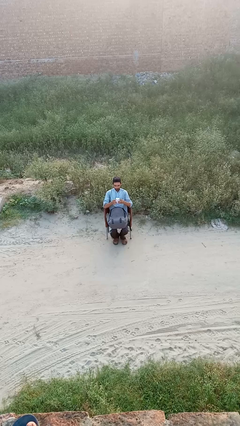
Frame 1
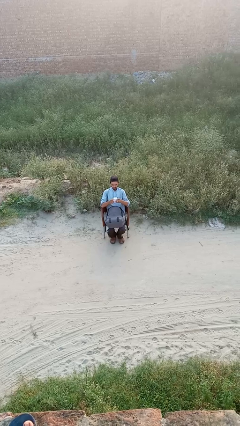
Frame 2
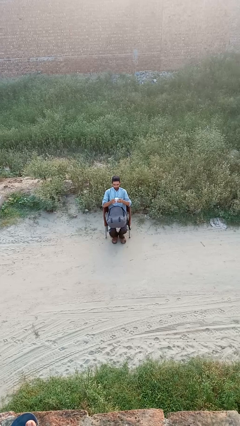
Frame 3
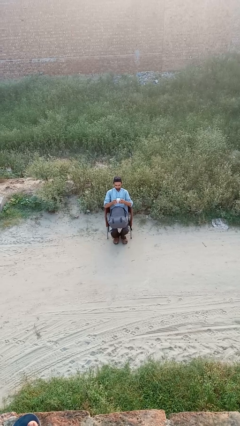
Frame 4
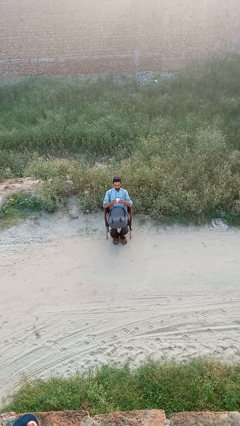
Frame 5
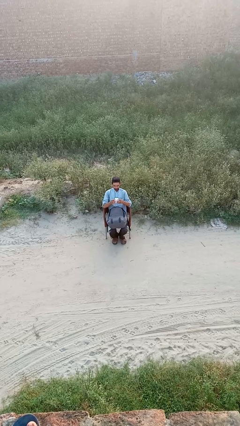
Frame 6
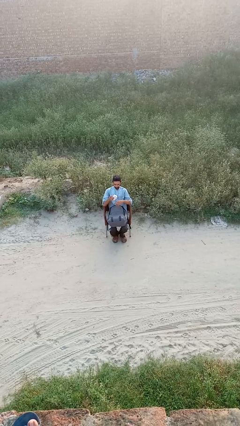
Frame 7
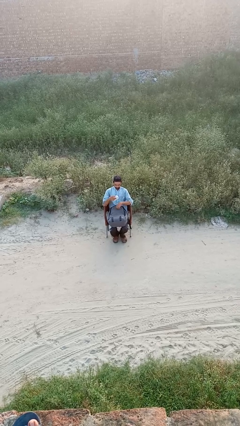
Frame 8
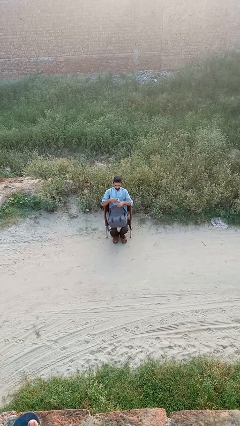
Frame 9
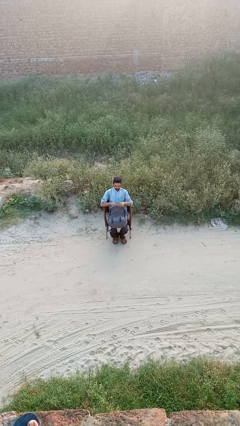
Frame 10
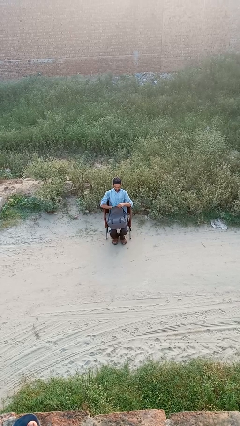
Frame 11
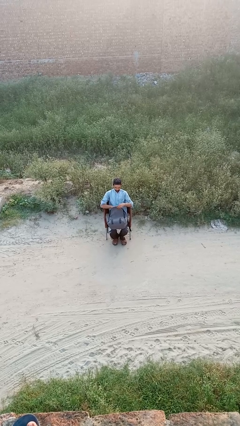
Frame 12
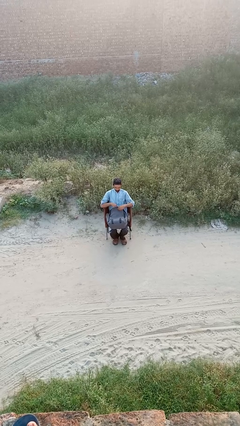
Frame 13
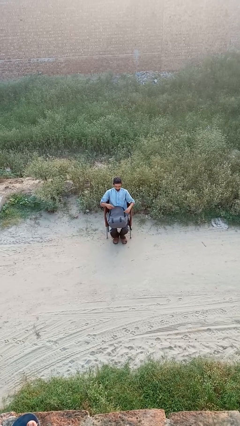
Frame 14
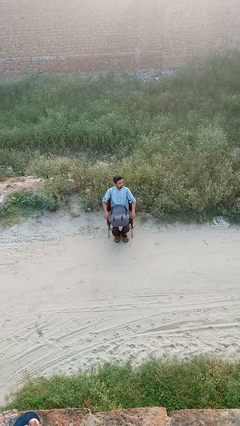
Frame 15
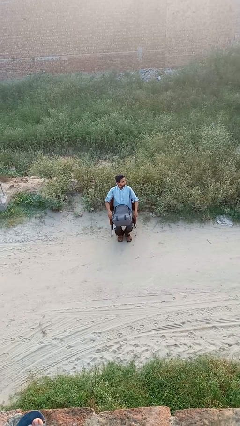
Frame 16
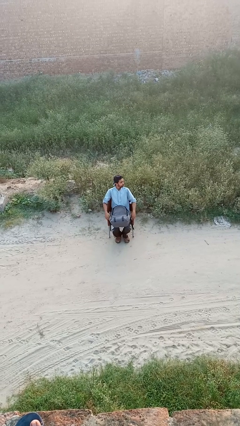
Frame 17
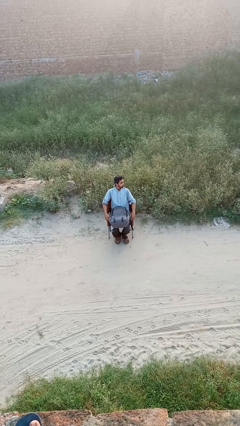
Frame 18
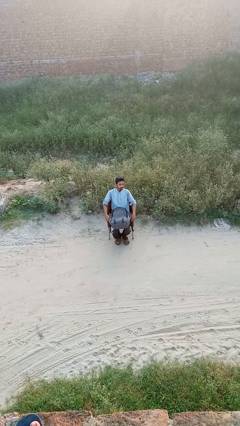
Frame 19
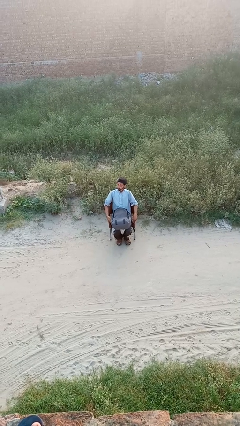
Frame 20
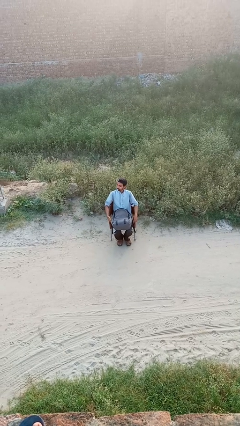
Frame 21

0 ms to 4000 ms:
person puts object into backpack

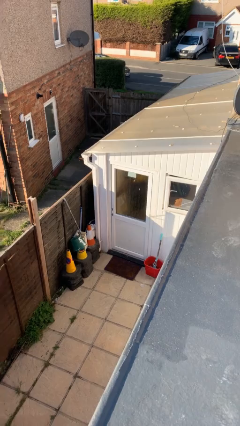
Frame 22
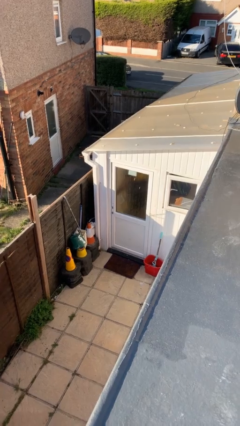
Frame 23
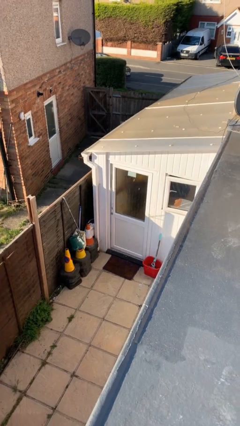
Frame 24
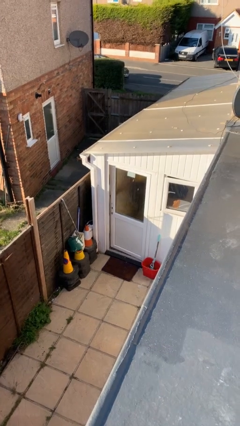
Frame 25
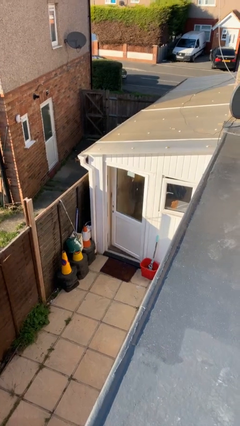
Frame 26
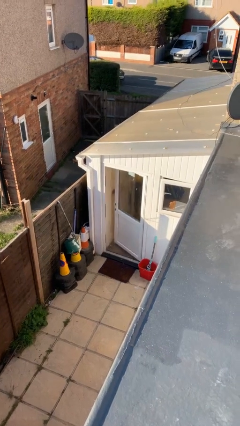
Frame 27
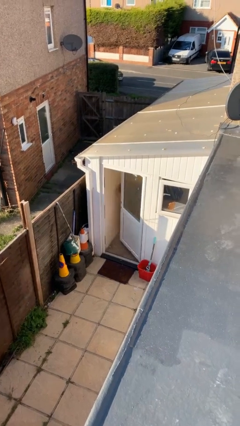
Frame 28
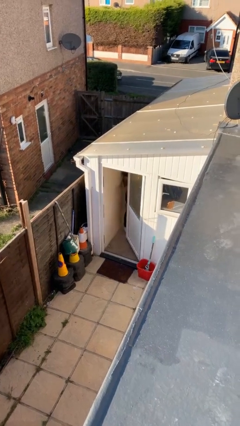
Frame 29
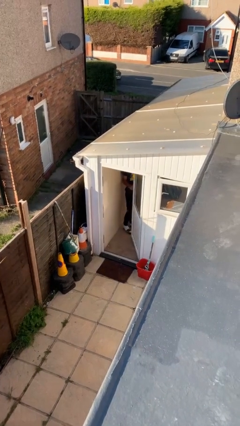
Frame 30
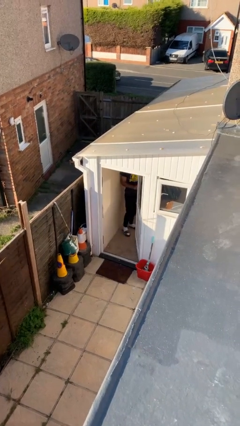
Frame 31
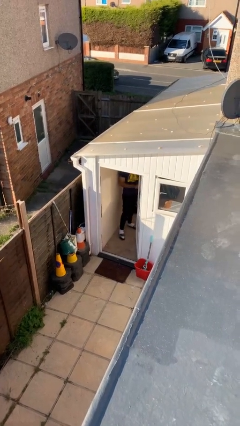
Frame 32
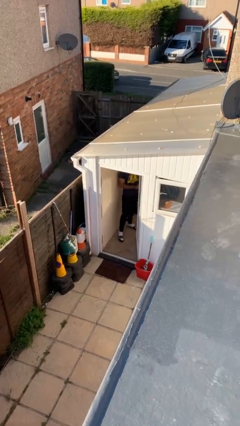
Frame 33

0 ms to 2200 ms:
person opens facility door

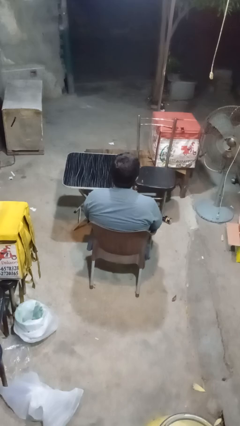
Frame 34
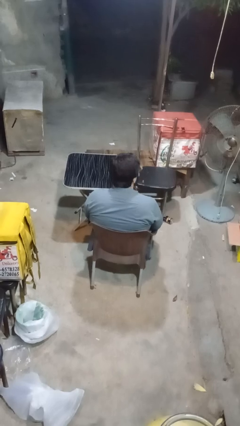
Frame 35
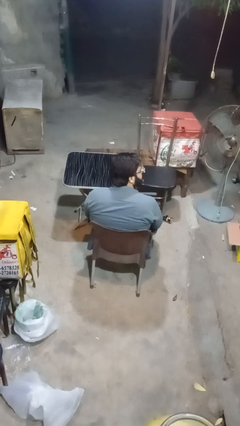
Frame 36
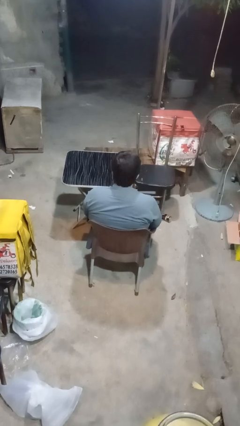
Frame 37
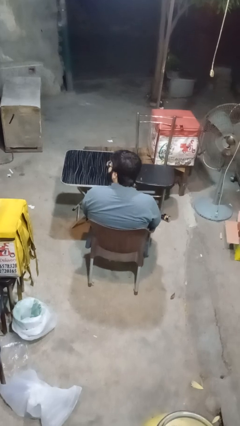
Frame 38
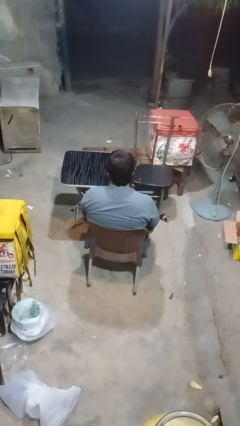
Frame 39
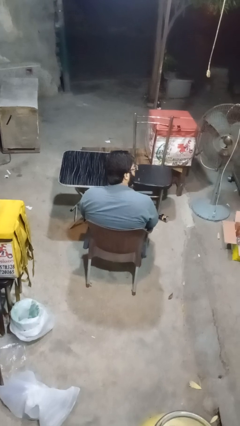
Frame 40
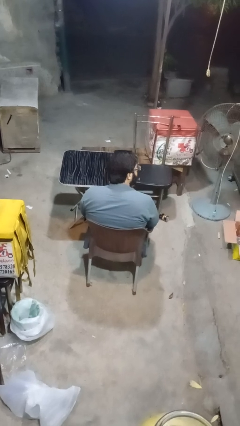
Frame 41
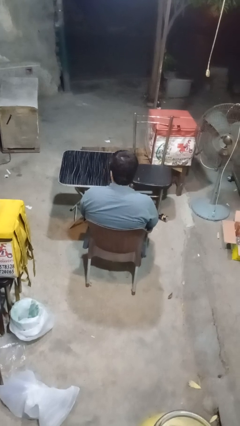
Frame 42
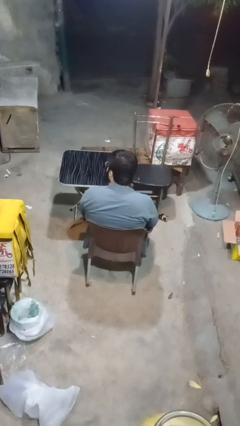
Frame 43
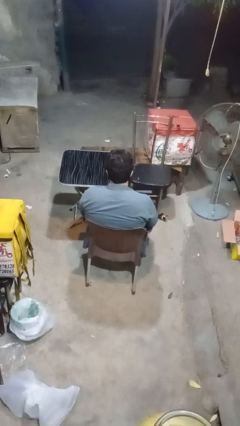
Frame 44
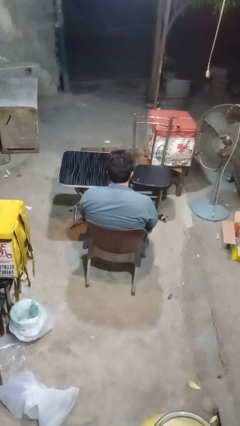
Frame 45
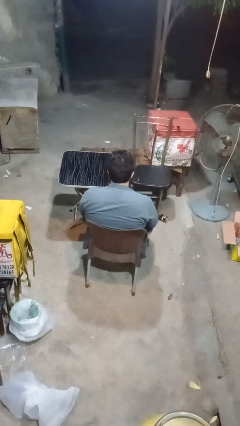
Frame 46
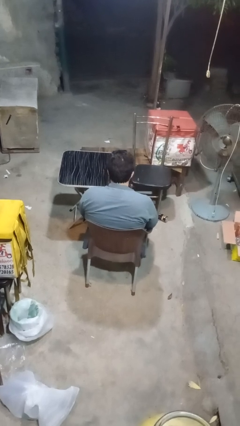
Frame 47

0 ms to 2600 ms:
person shakes head

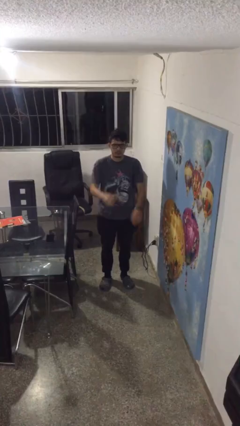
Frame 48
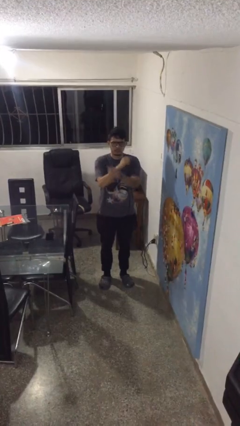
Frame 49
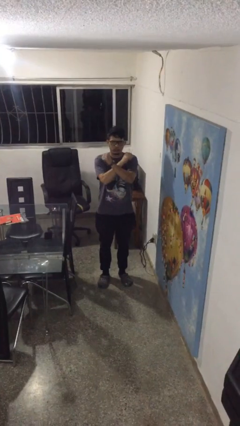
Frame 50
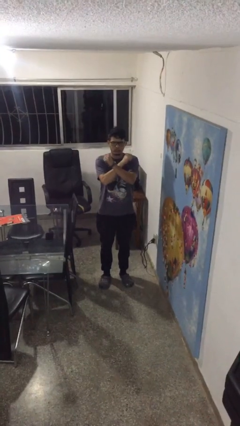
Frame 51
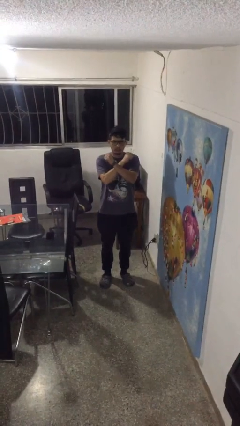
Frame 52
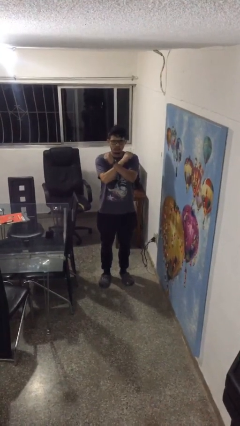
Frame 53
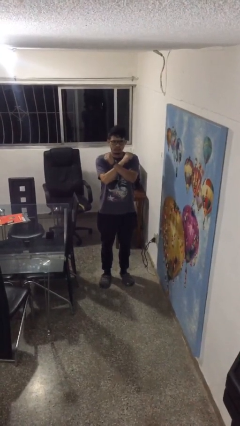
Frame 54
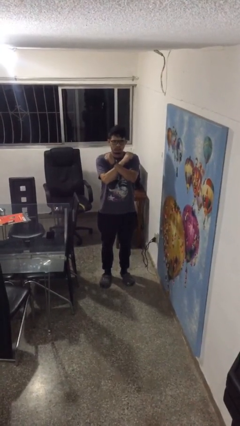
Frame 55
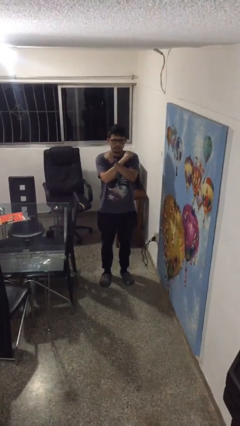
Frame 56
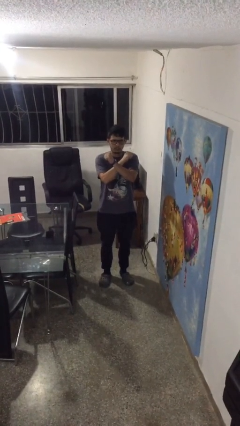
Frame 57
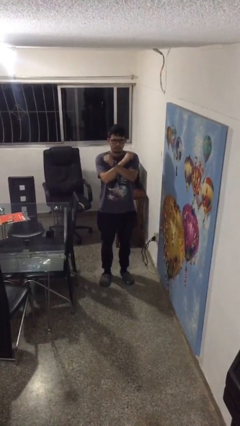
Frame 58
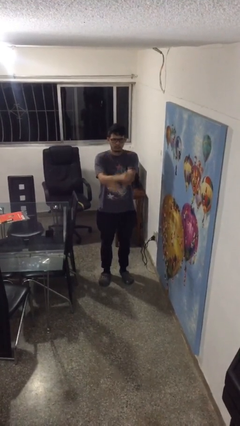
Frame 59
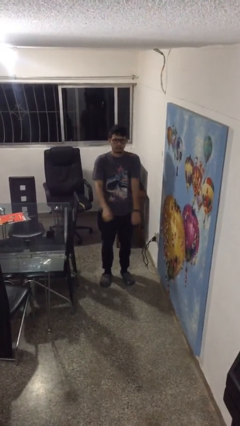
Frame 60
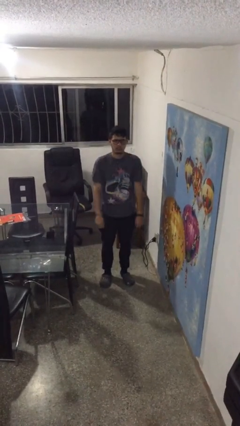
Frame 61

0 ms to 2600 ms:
person gestures arms x

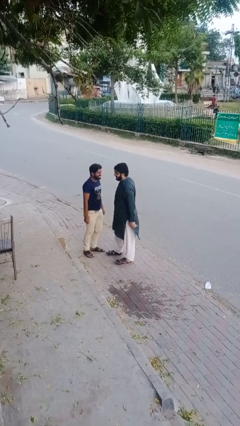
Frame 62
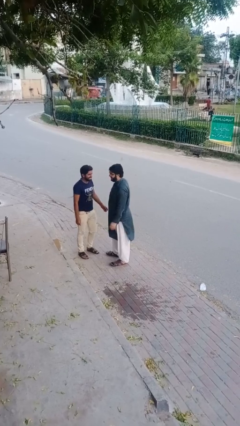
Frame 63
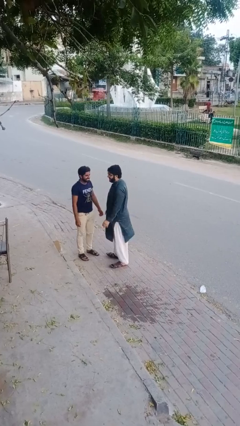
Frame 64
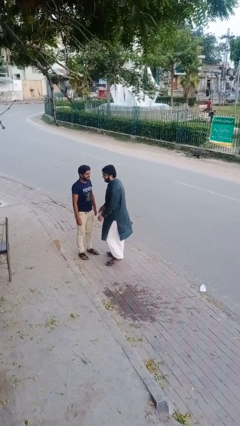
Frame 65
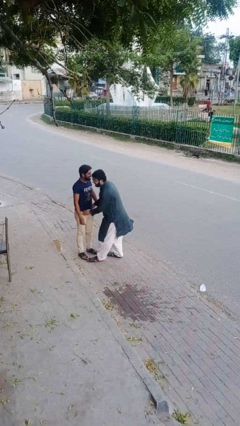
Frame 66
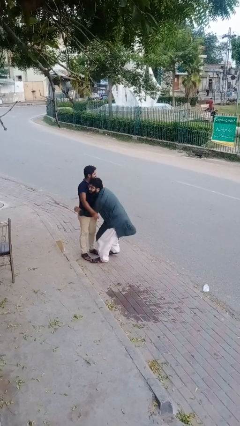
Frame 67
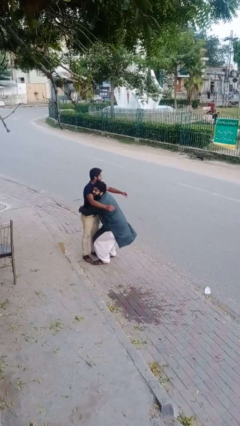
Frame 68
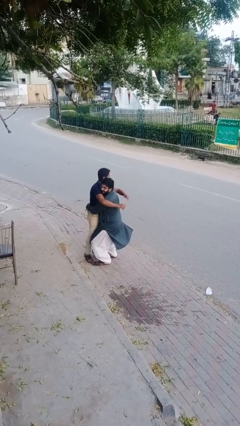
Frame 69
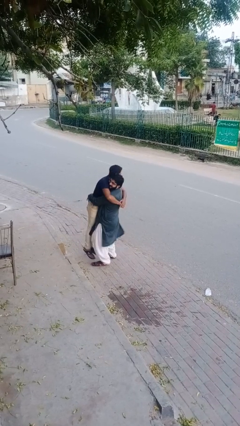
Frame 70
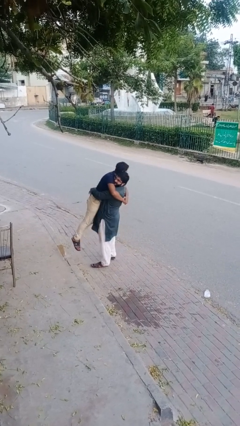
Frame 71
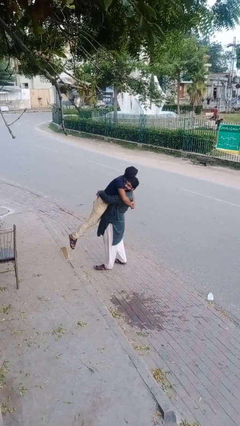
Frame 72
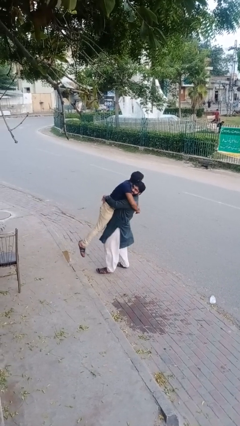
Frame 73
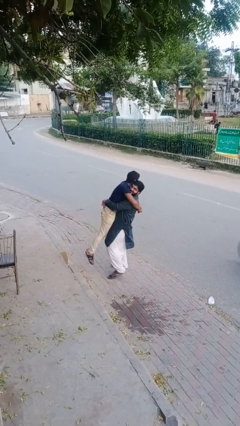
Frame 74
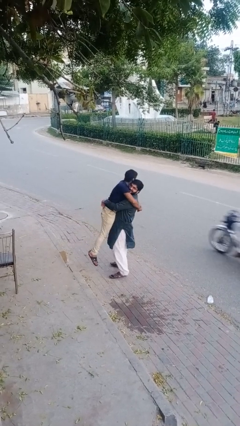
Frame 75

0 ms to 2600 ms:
person picks up person

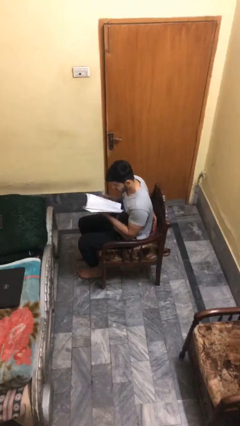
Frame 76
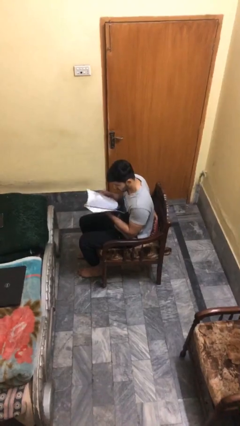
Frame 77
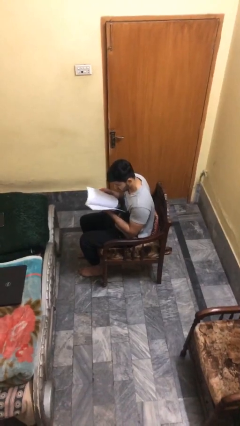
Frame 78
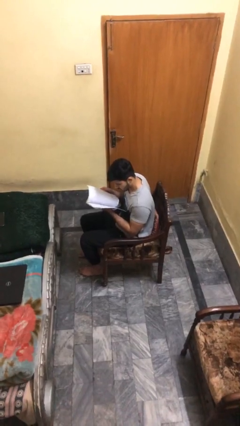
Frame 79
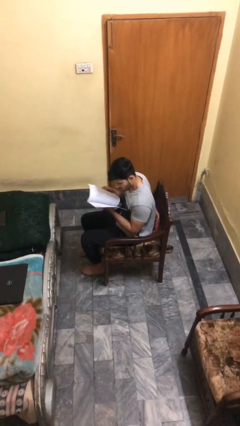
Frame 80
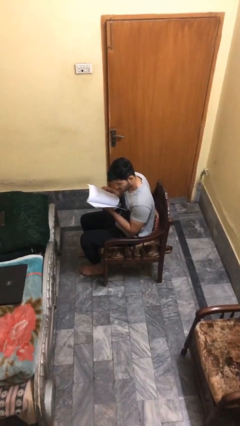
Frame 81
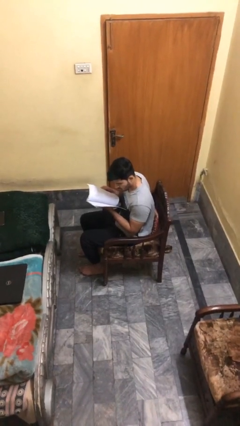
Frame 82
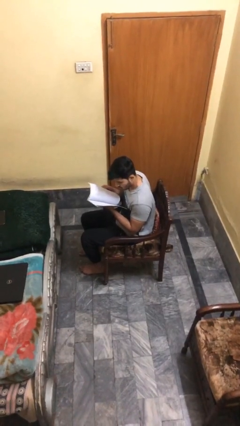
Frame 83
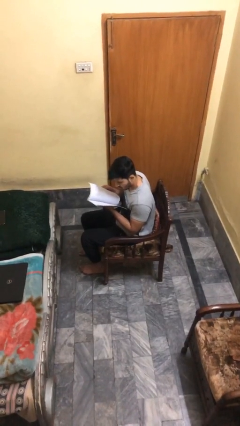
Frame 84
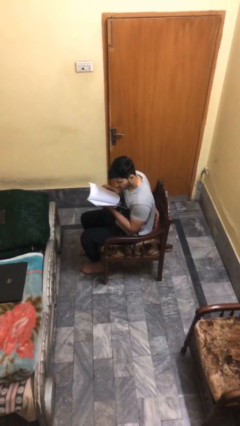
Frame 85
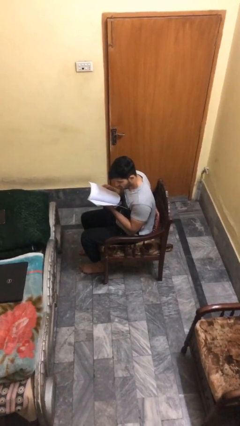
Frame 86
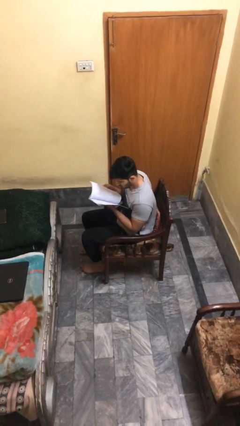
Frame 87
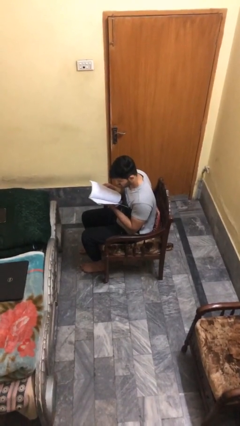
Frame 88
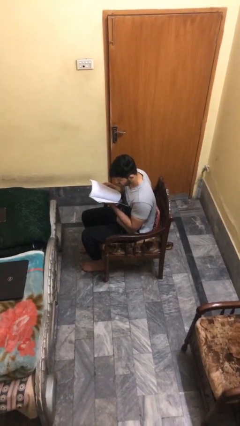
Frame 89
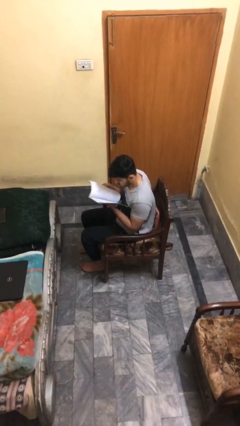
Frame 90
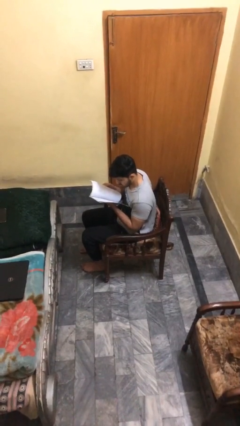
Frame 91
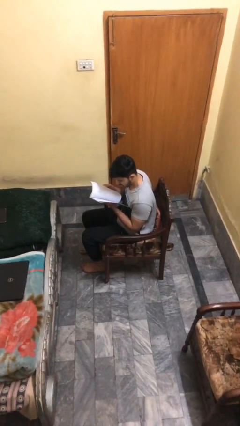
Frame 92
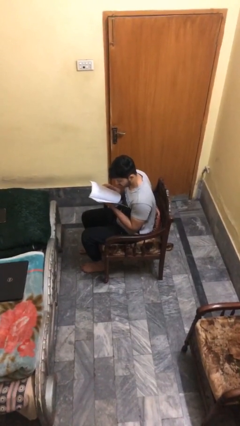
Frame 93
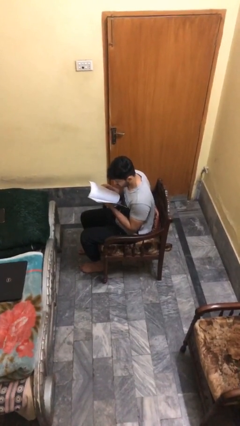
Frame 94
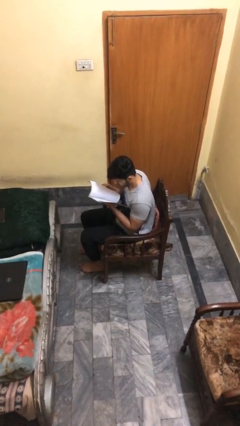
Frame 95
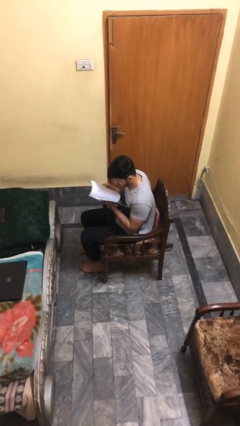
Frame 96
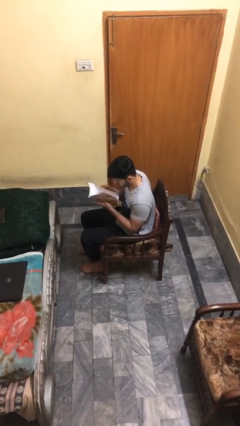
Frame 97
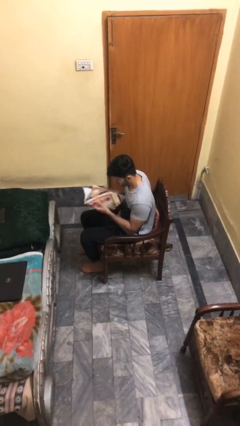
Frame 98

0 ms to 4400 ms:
person reads document
